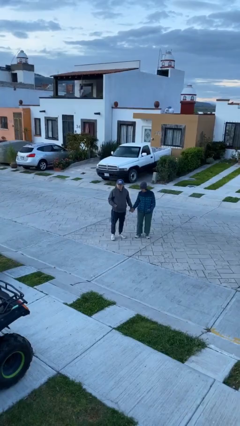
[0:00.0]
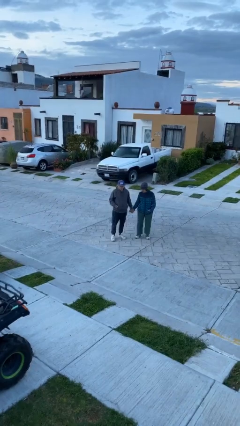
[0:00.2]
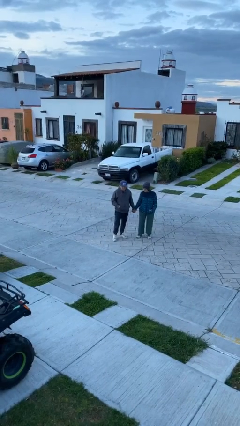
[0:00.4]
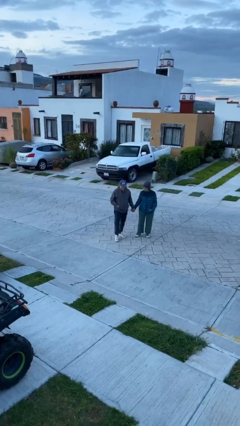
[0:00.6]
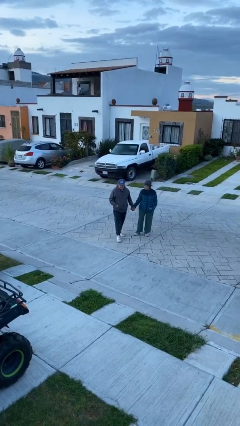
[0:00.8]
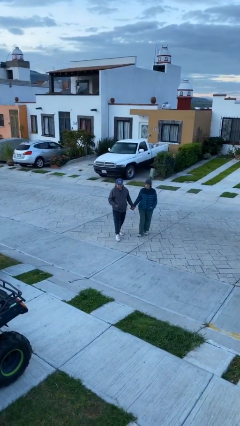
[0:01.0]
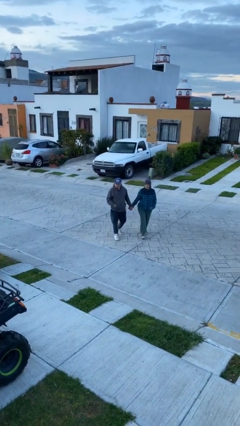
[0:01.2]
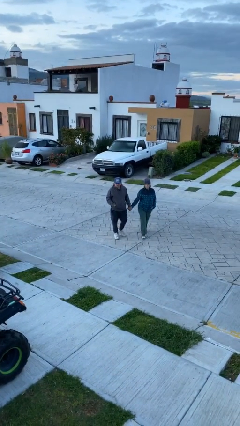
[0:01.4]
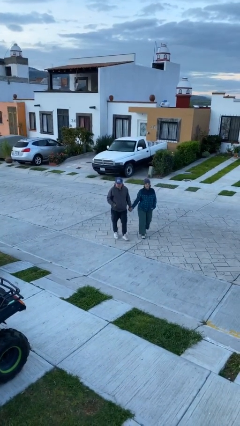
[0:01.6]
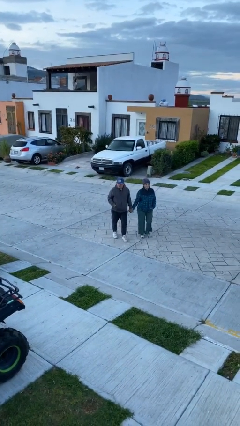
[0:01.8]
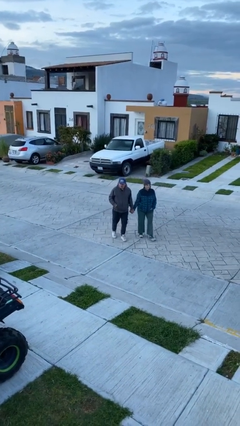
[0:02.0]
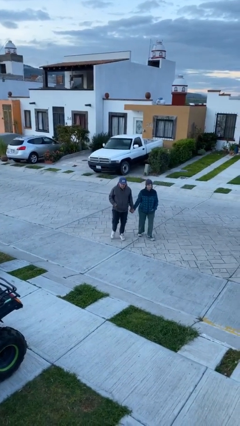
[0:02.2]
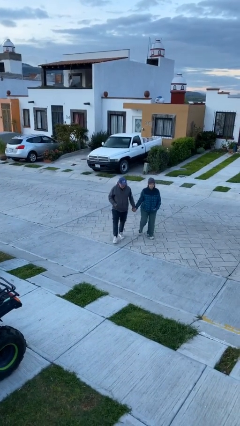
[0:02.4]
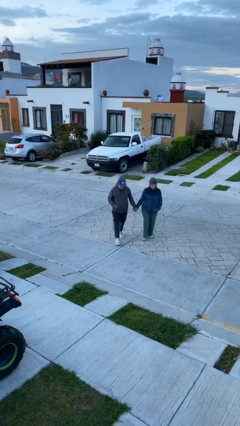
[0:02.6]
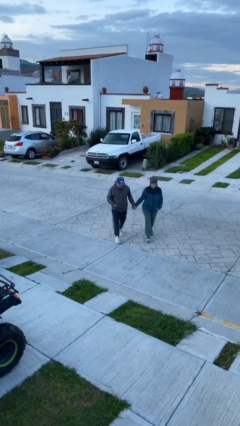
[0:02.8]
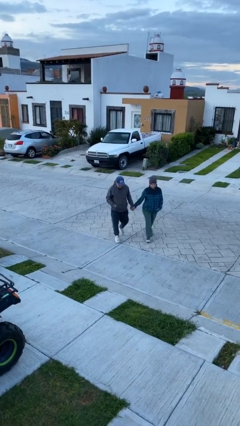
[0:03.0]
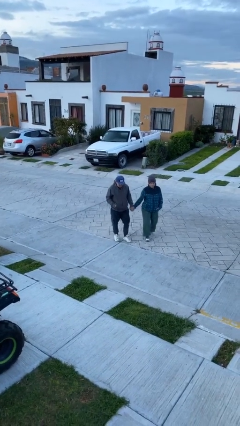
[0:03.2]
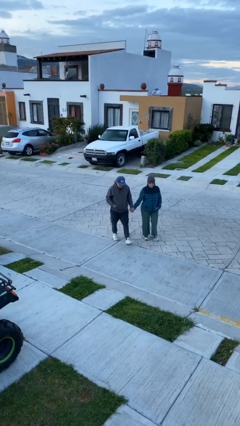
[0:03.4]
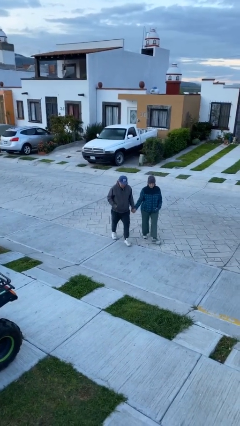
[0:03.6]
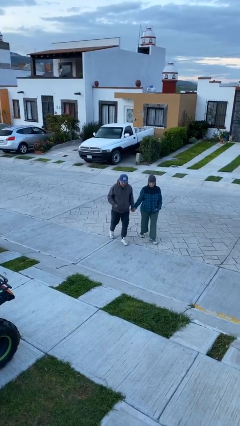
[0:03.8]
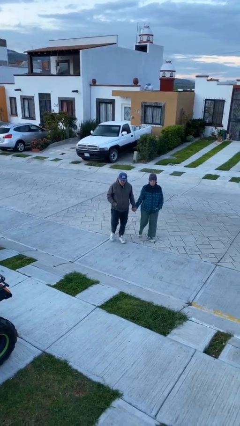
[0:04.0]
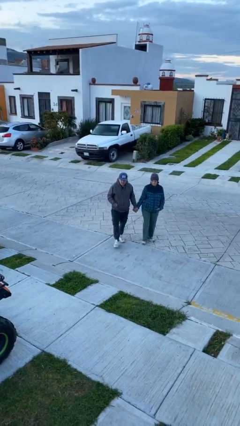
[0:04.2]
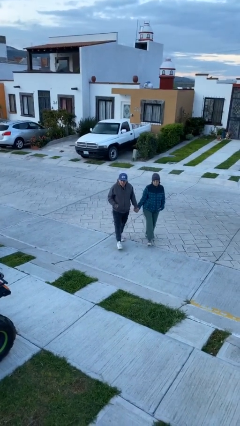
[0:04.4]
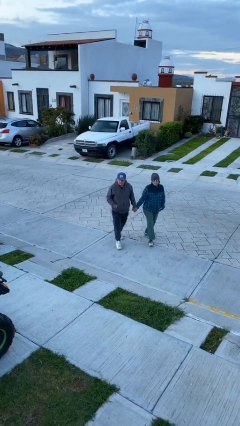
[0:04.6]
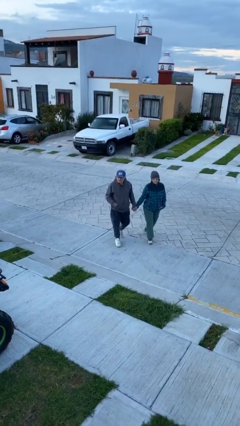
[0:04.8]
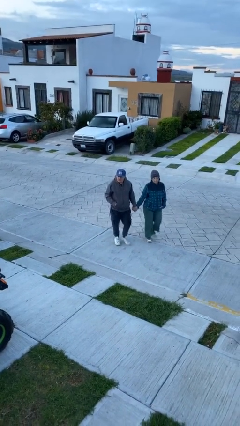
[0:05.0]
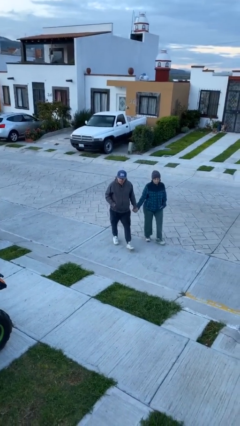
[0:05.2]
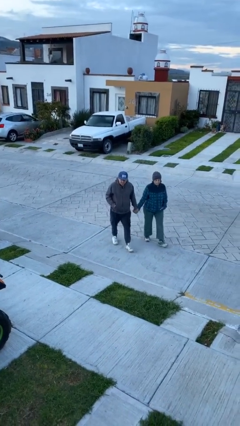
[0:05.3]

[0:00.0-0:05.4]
person holds hand

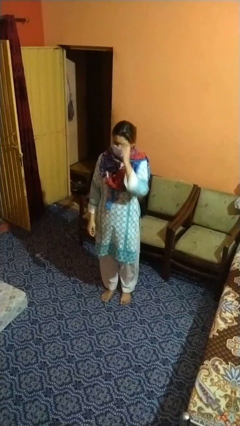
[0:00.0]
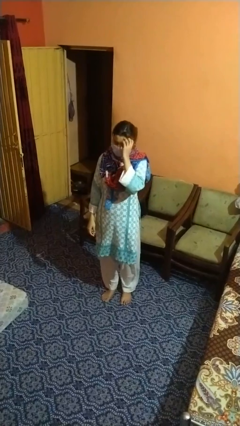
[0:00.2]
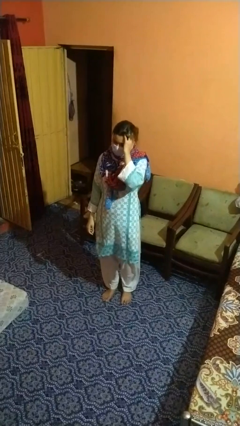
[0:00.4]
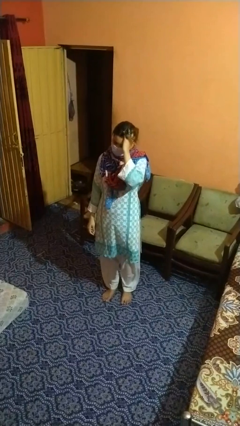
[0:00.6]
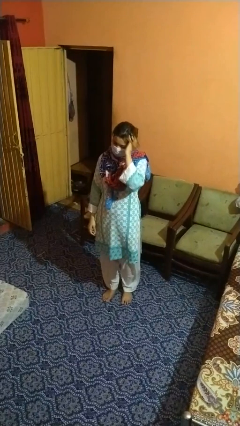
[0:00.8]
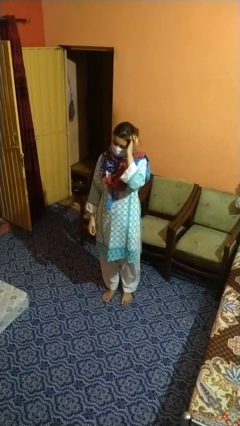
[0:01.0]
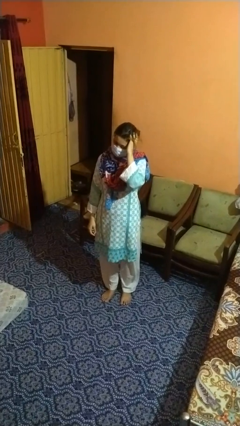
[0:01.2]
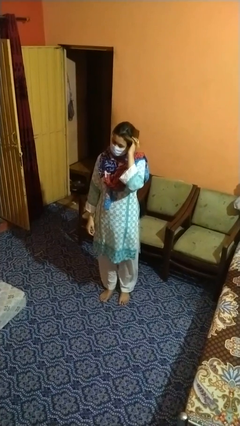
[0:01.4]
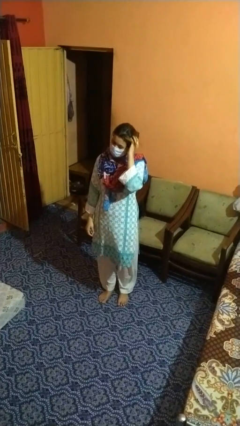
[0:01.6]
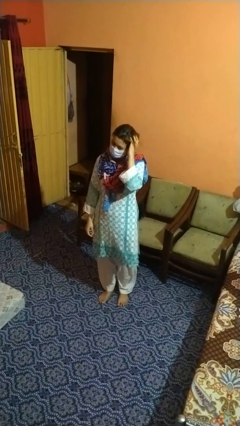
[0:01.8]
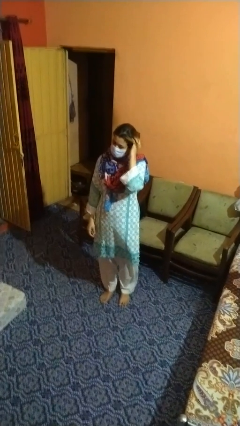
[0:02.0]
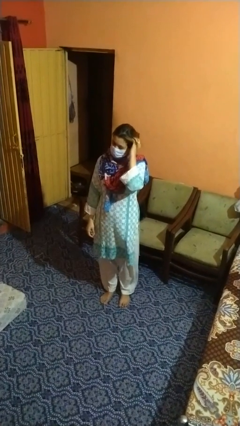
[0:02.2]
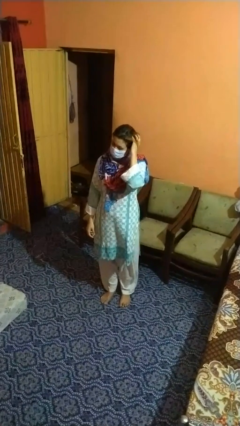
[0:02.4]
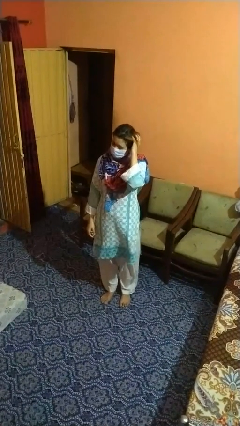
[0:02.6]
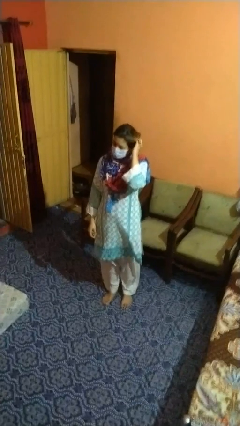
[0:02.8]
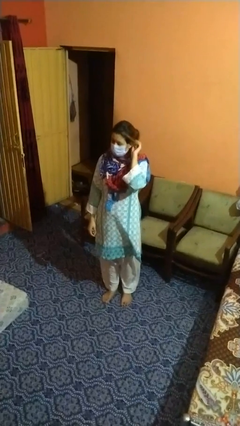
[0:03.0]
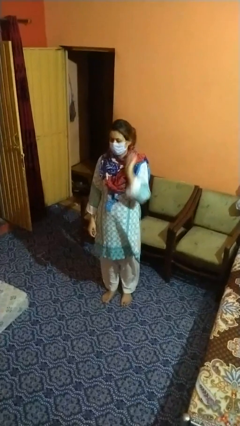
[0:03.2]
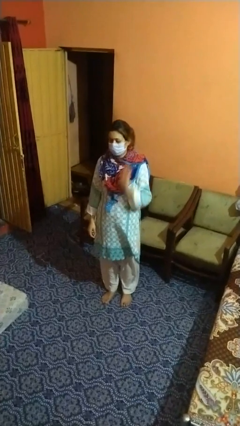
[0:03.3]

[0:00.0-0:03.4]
person strokes hair

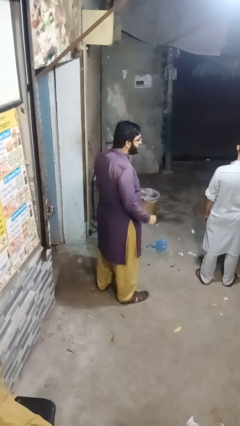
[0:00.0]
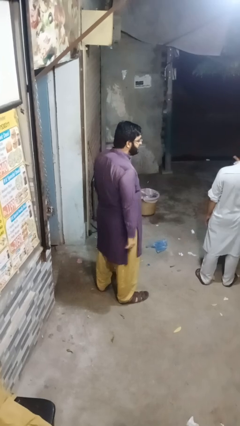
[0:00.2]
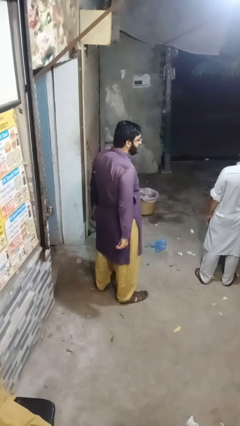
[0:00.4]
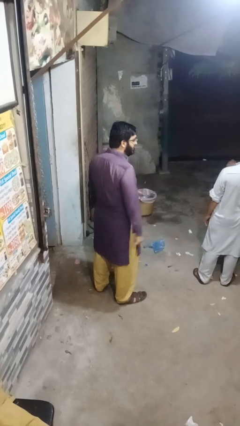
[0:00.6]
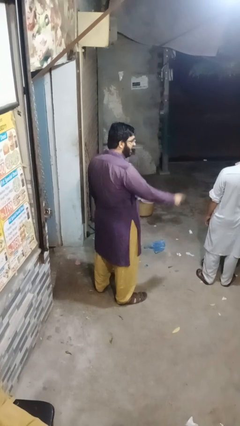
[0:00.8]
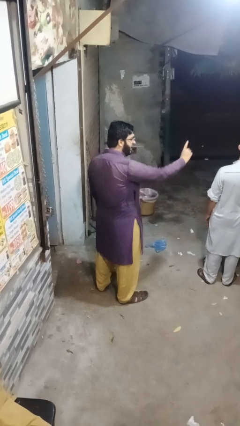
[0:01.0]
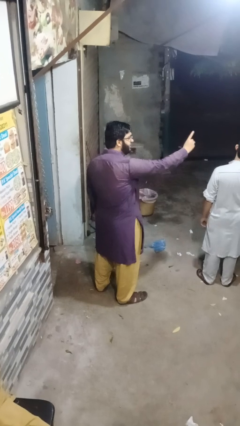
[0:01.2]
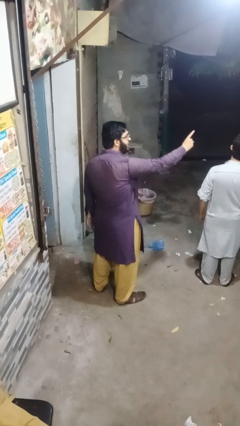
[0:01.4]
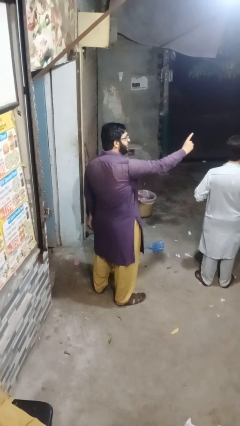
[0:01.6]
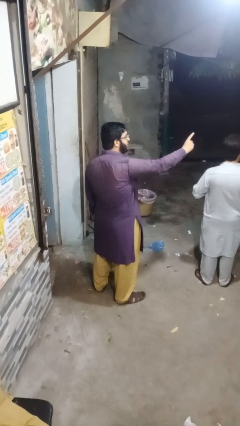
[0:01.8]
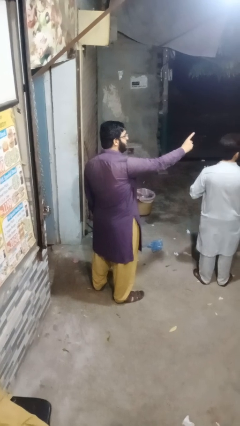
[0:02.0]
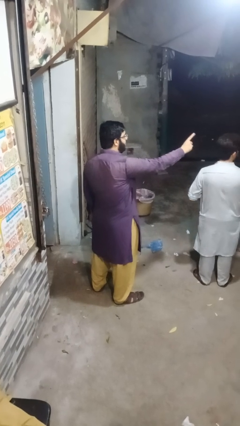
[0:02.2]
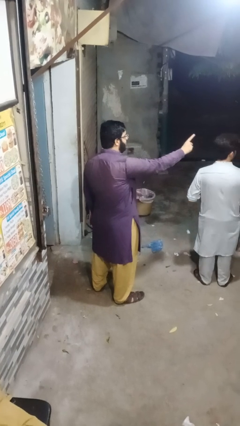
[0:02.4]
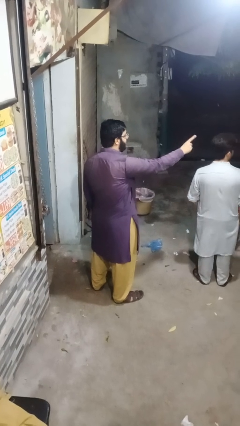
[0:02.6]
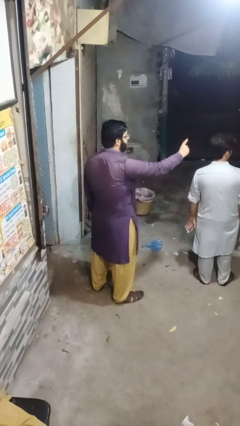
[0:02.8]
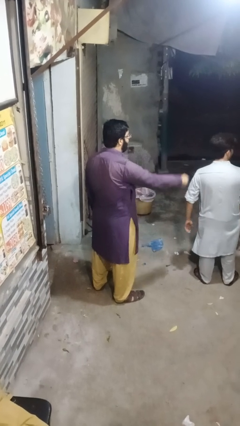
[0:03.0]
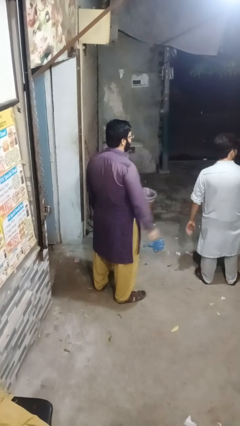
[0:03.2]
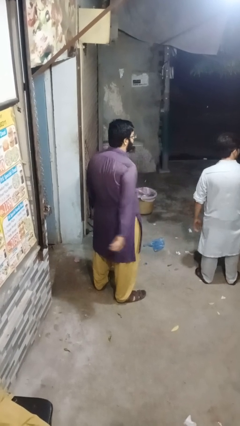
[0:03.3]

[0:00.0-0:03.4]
person points at person

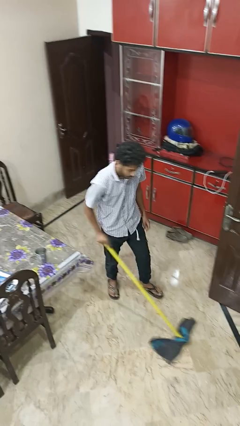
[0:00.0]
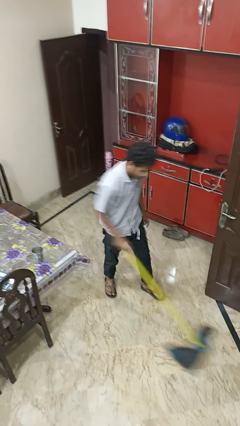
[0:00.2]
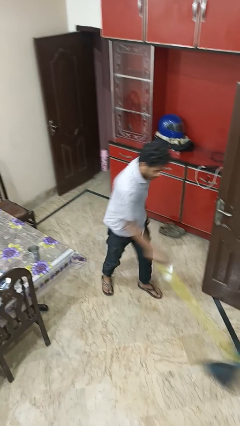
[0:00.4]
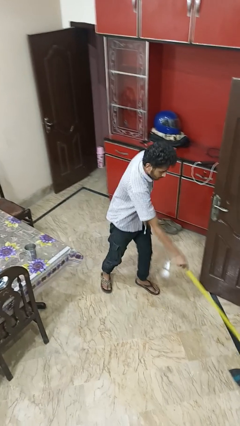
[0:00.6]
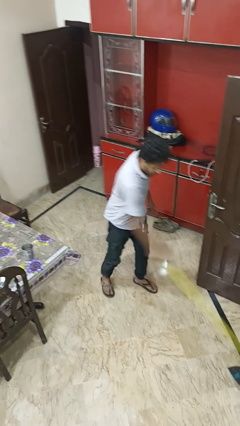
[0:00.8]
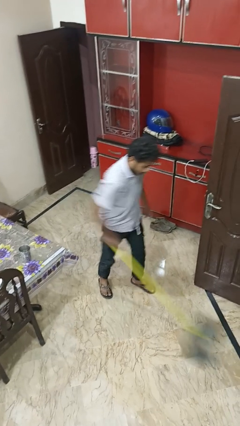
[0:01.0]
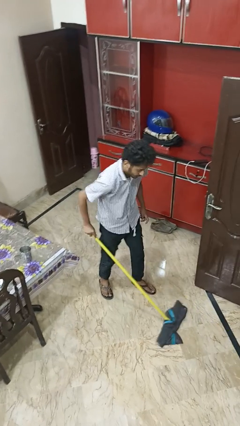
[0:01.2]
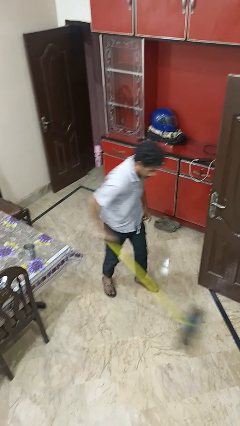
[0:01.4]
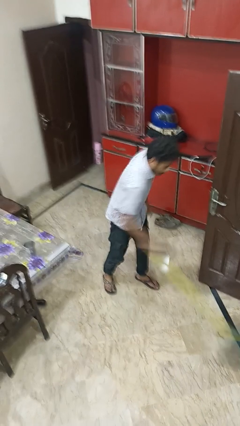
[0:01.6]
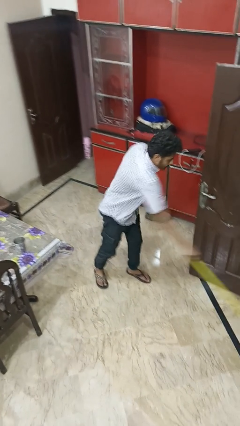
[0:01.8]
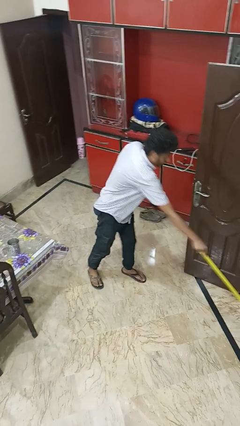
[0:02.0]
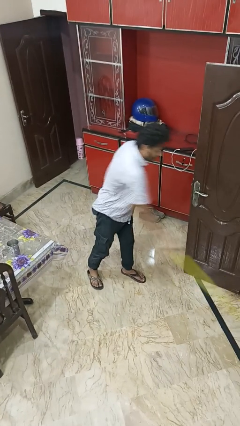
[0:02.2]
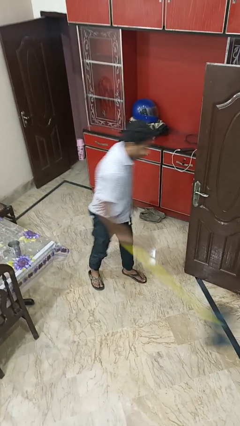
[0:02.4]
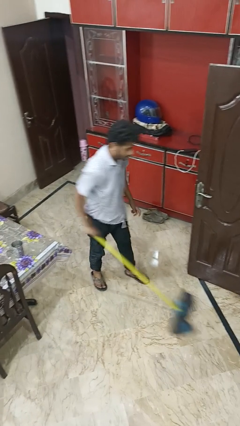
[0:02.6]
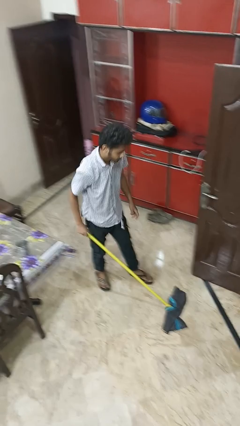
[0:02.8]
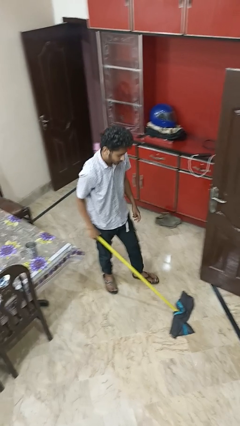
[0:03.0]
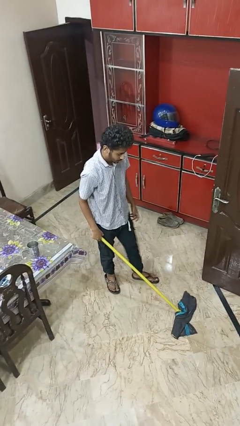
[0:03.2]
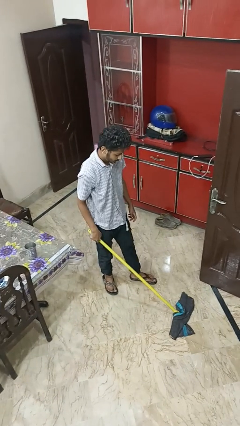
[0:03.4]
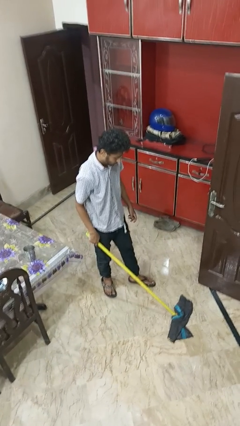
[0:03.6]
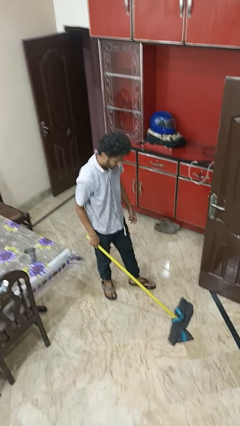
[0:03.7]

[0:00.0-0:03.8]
person mops

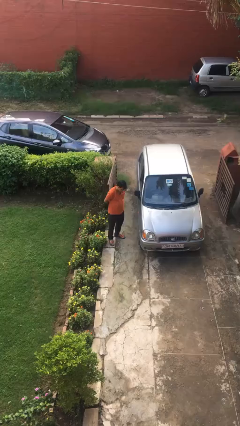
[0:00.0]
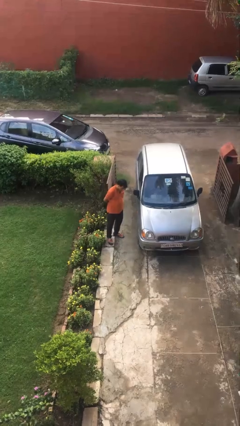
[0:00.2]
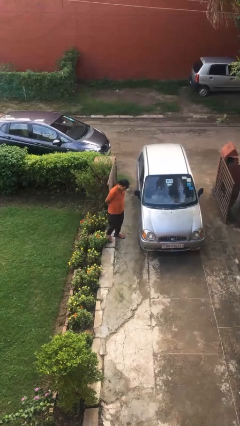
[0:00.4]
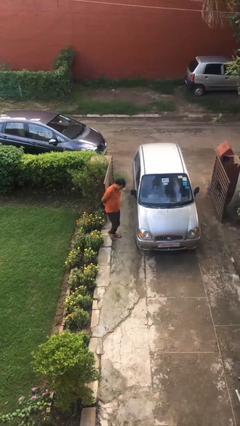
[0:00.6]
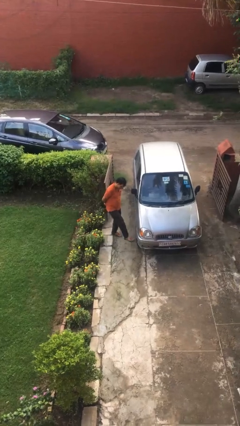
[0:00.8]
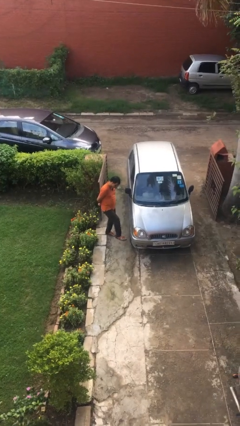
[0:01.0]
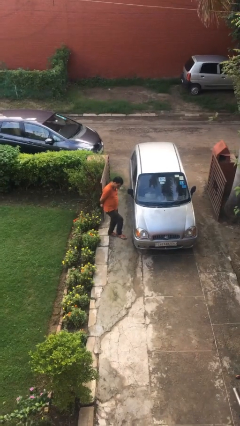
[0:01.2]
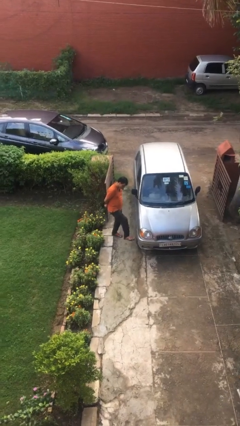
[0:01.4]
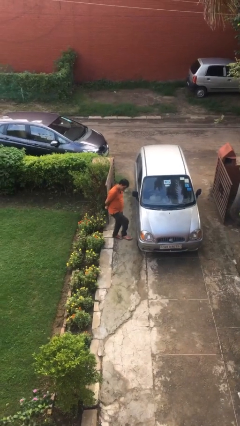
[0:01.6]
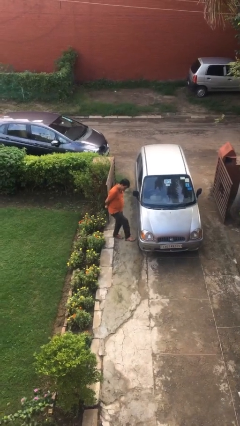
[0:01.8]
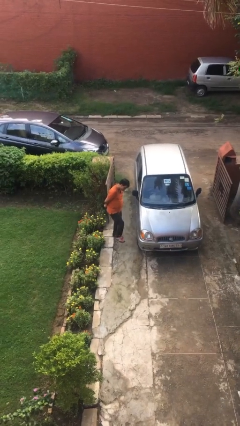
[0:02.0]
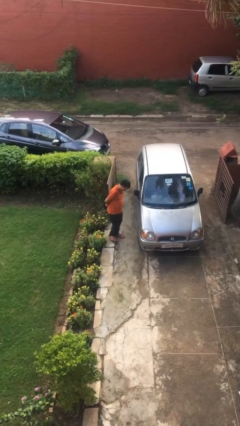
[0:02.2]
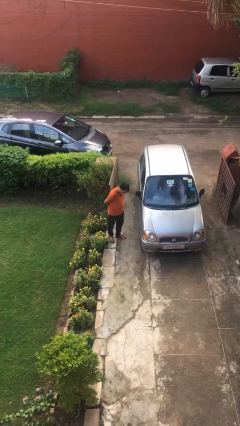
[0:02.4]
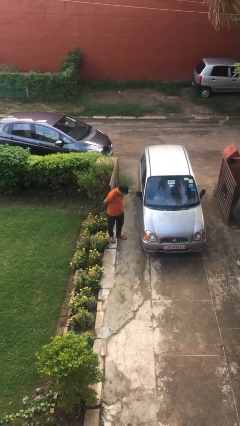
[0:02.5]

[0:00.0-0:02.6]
person kicks car tires
